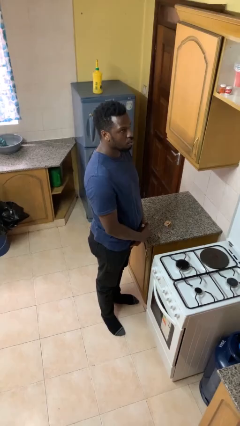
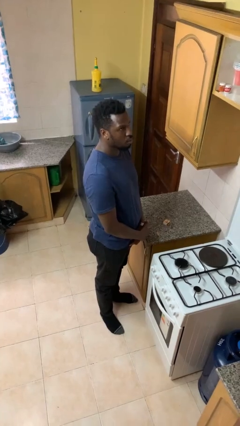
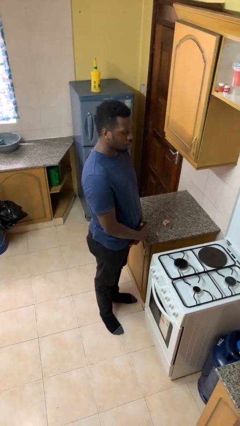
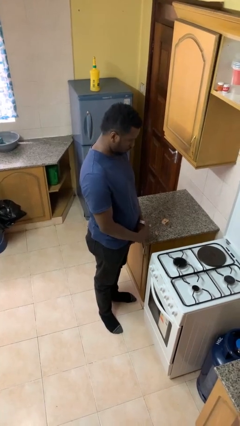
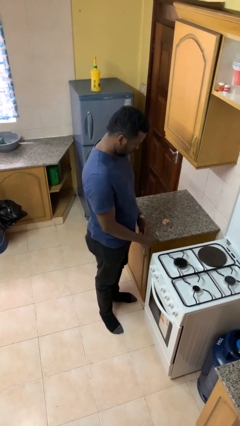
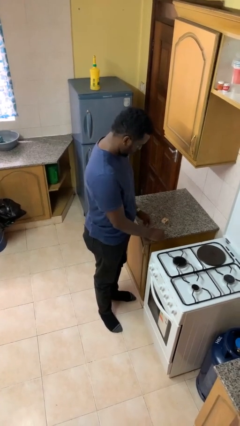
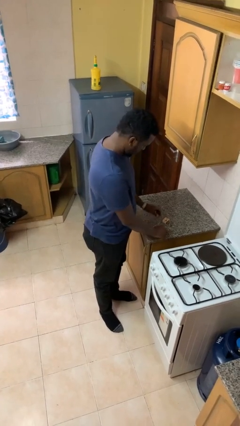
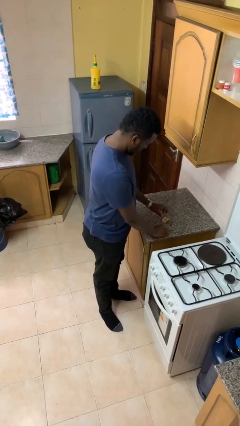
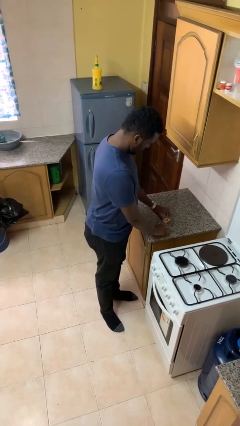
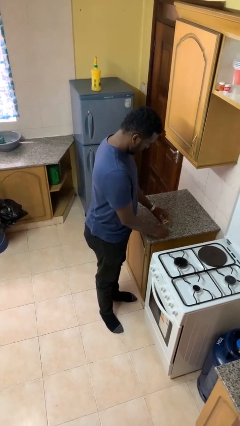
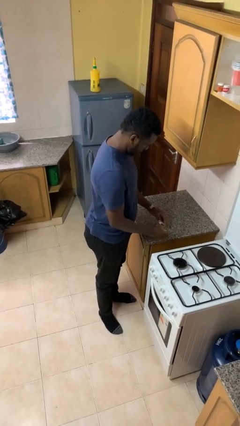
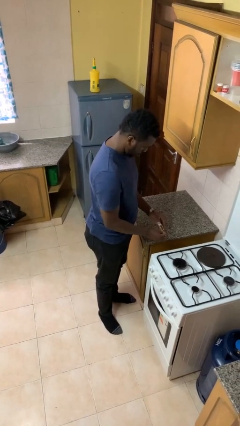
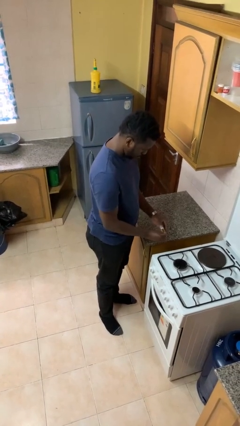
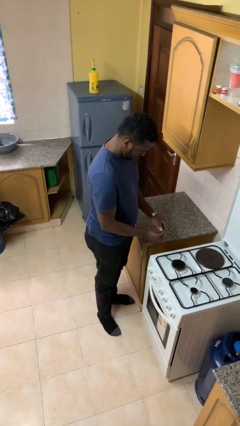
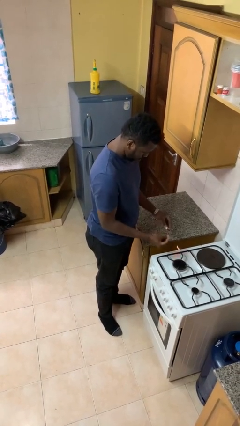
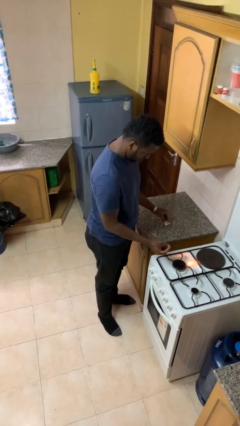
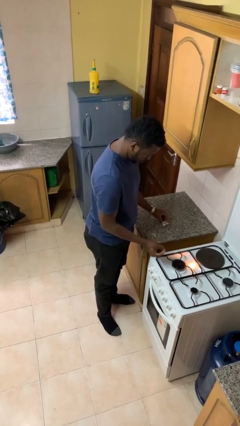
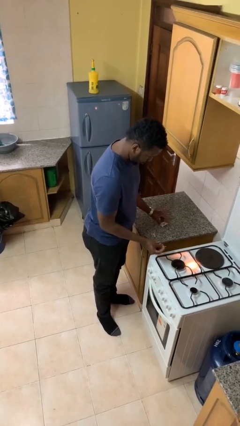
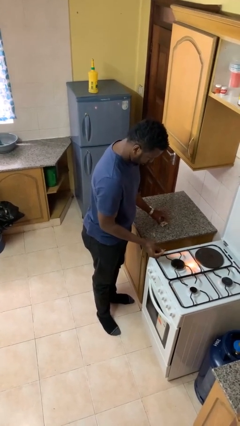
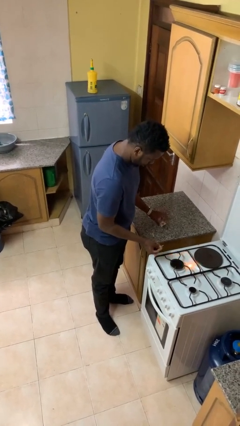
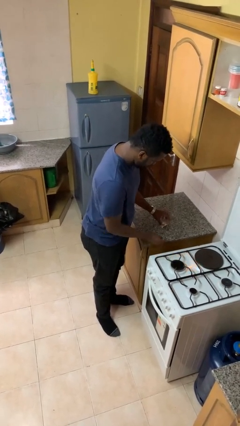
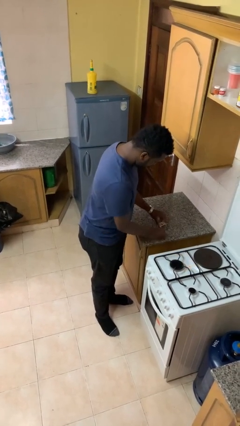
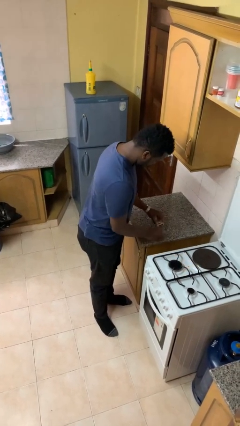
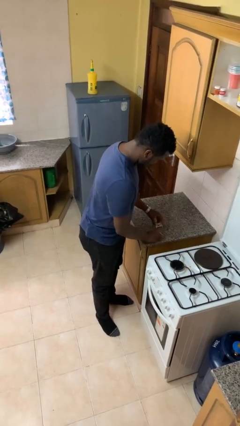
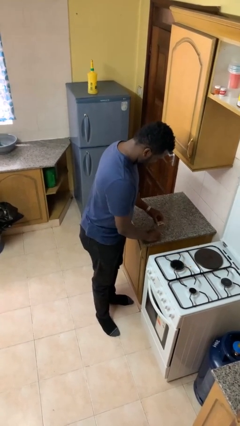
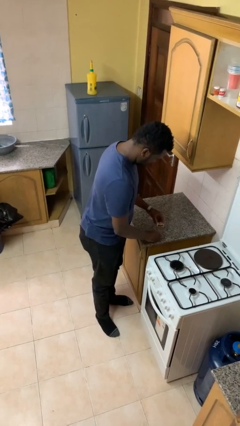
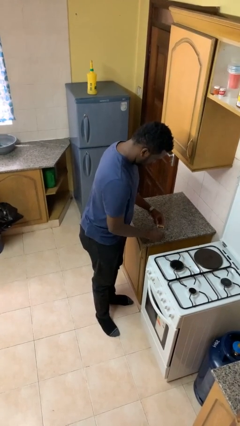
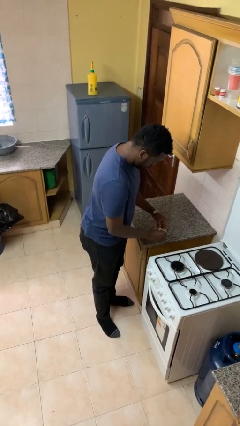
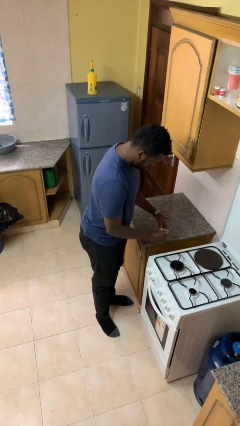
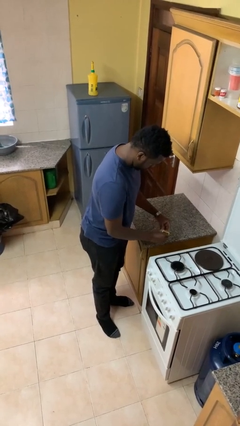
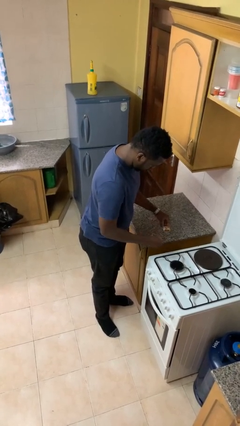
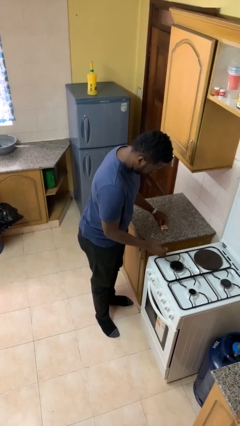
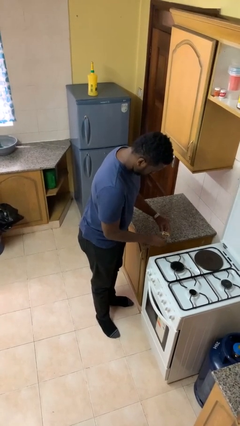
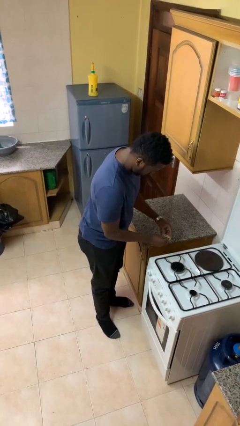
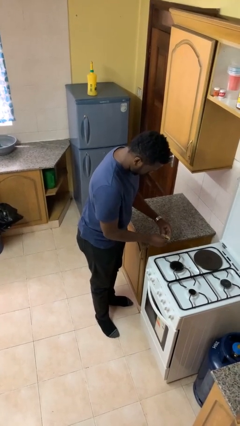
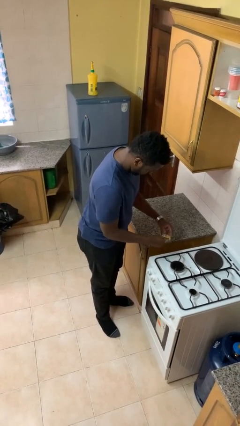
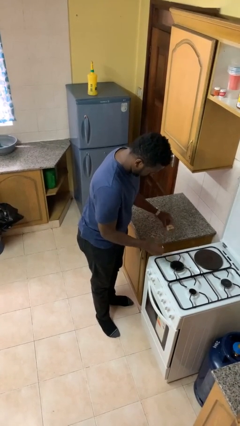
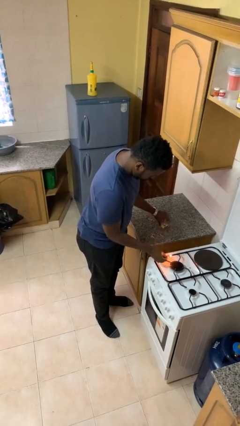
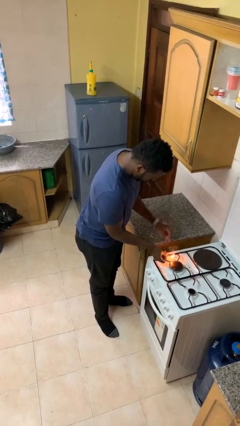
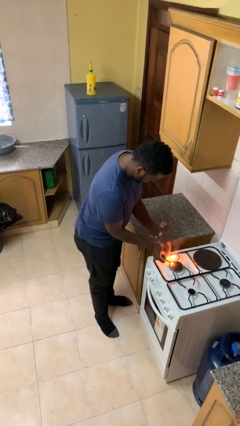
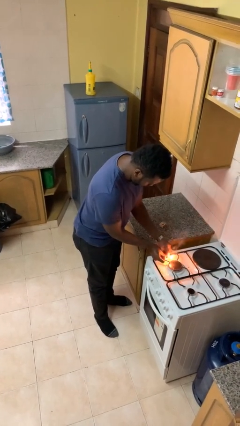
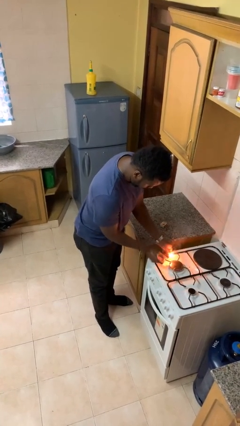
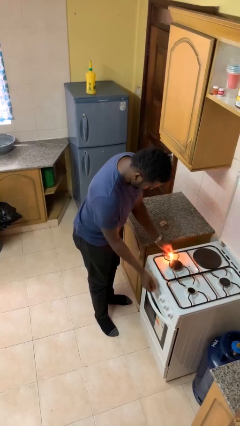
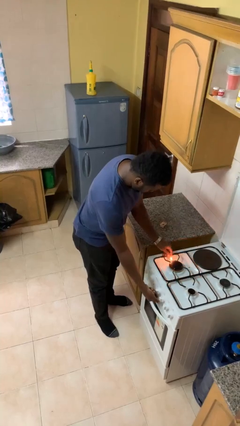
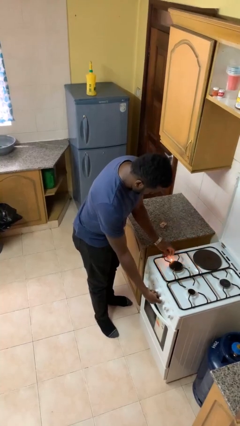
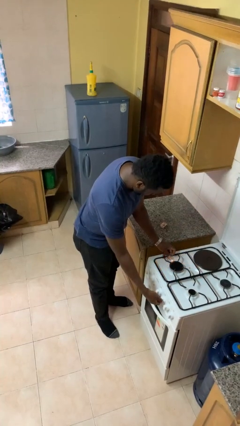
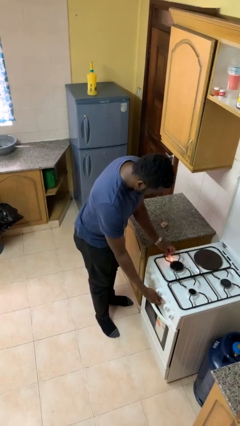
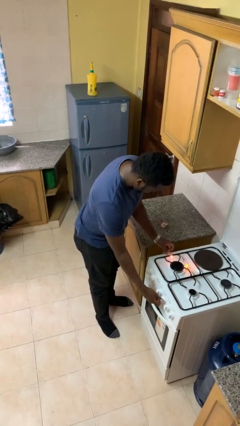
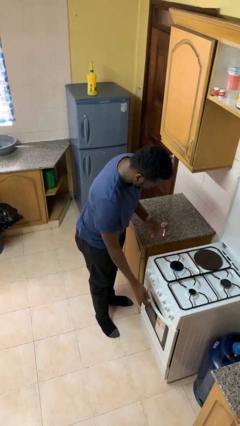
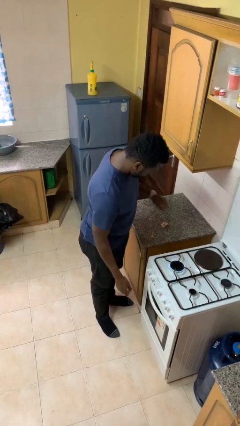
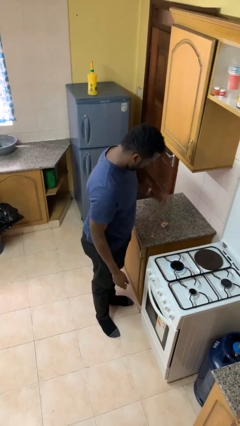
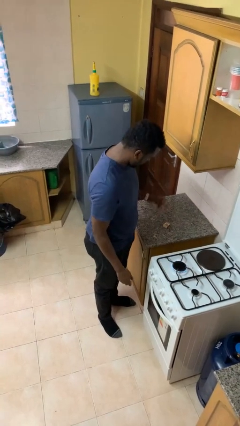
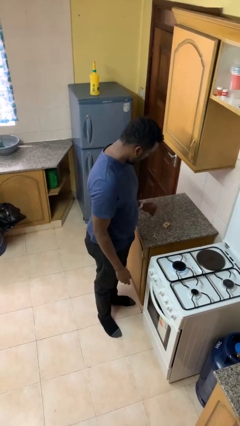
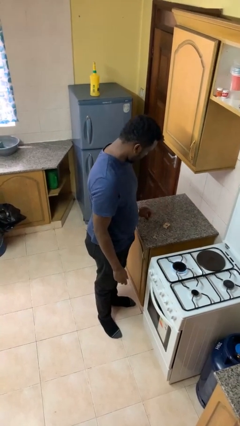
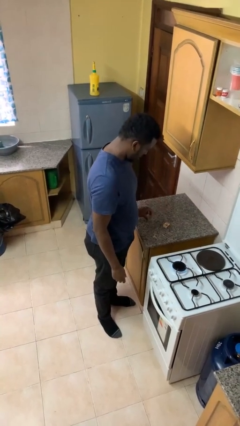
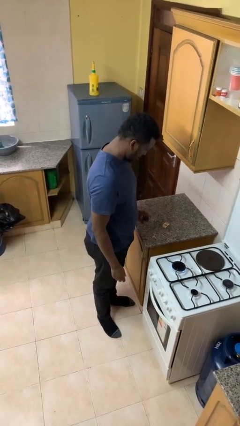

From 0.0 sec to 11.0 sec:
person turns on stovetop

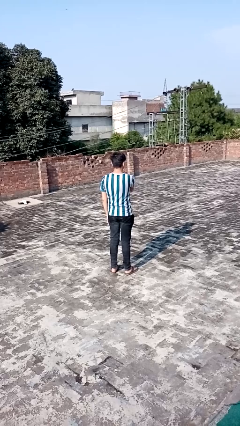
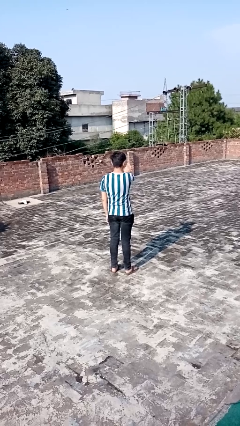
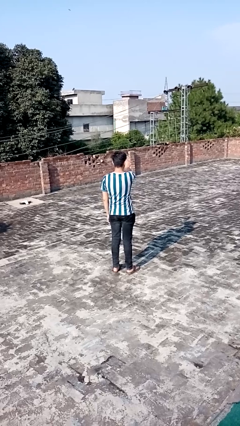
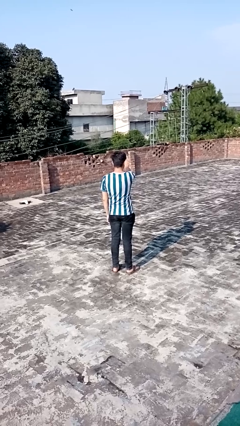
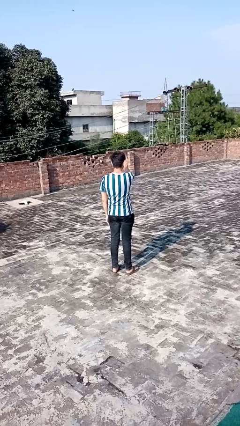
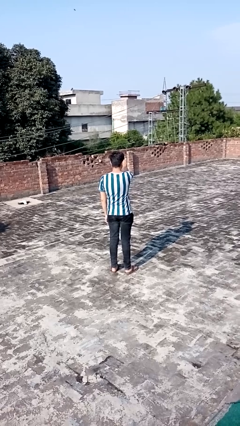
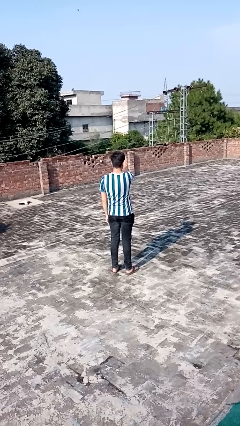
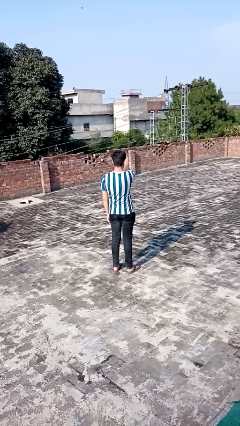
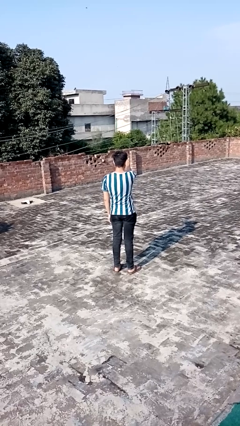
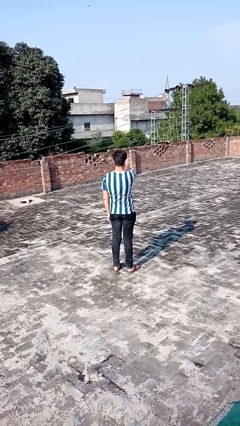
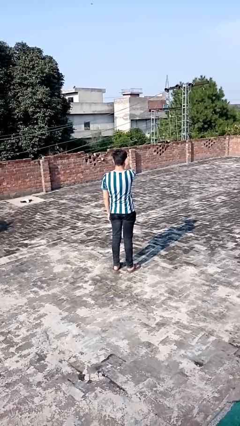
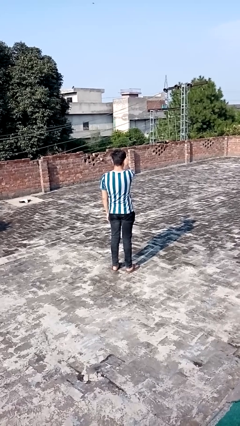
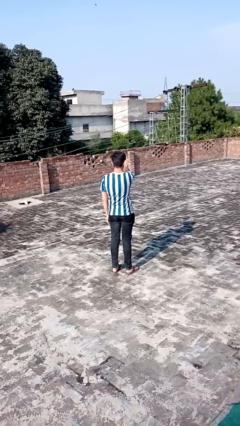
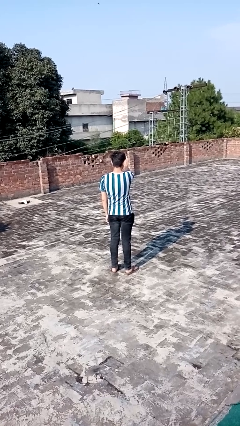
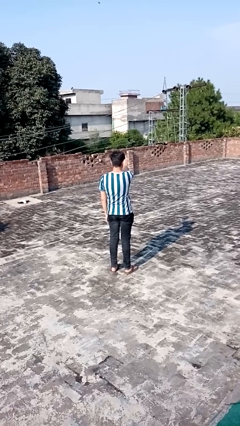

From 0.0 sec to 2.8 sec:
person gestures stop

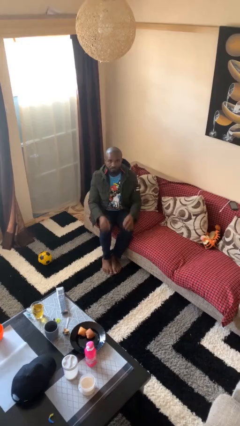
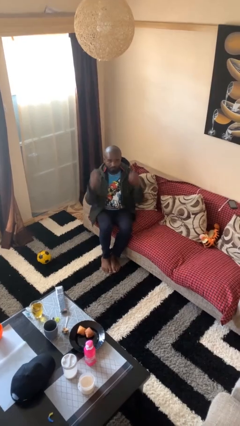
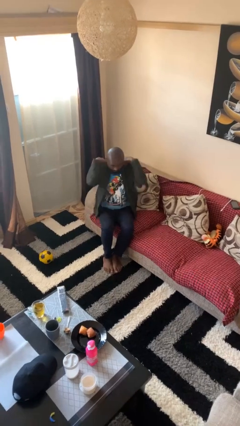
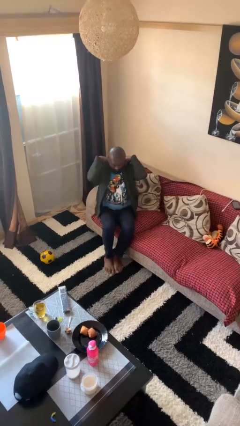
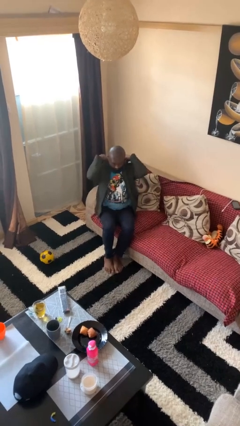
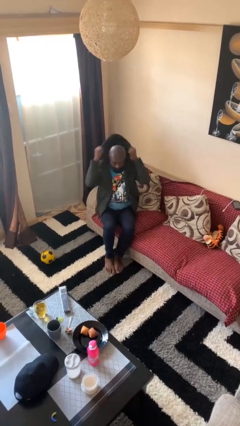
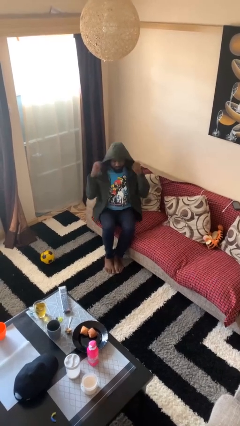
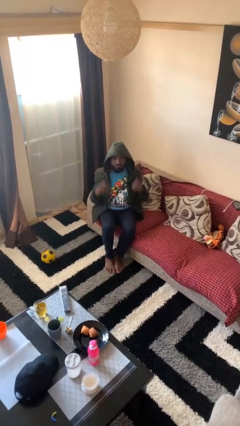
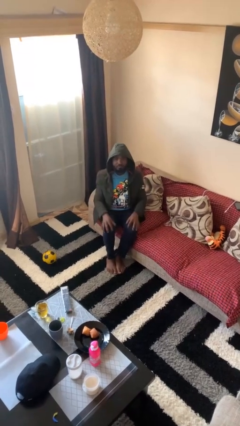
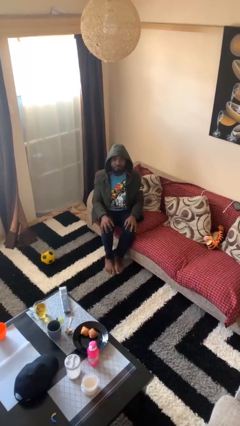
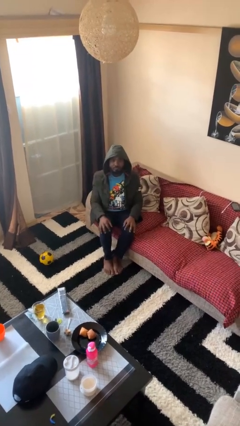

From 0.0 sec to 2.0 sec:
person puts on hoodie

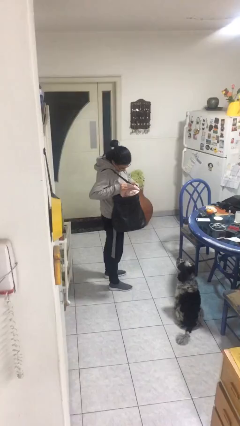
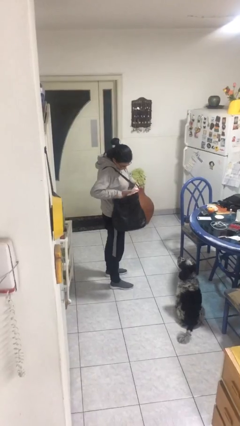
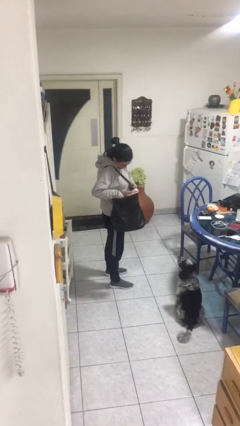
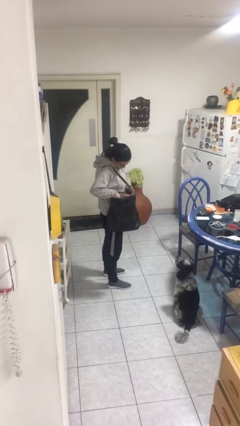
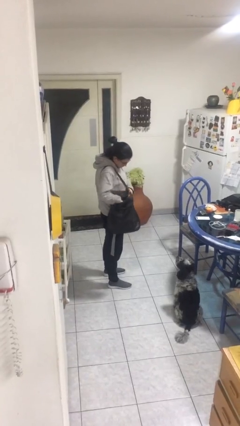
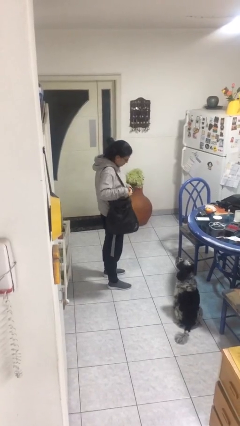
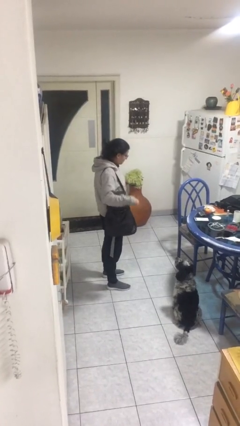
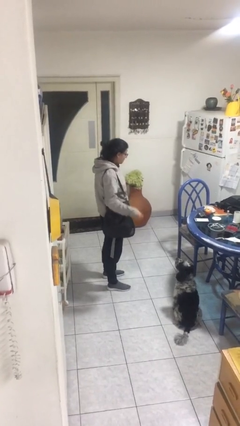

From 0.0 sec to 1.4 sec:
person puts object into purse

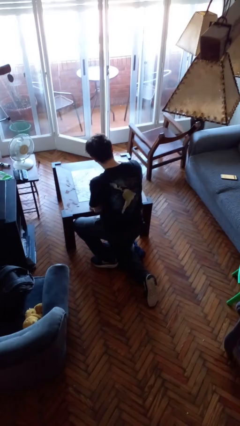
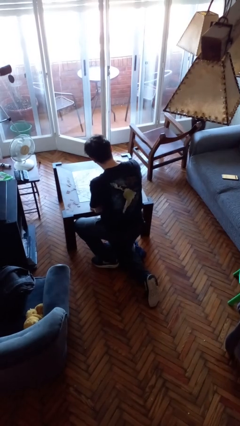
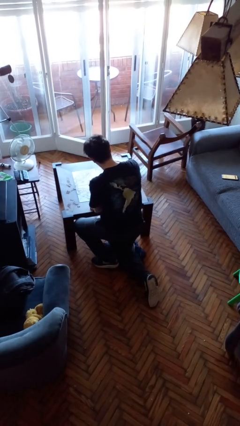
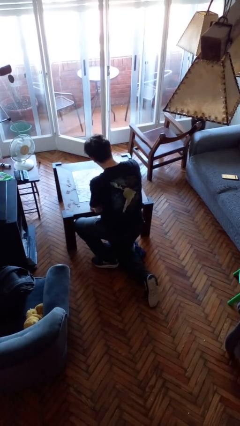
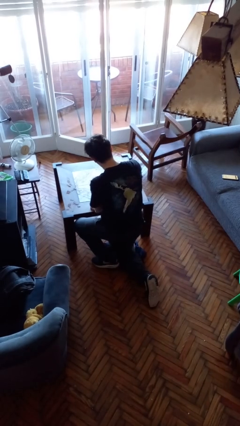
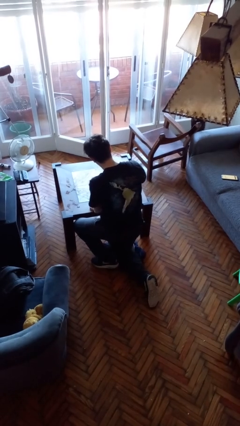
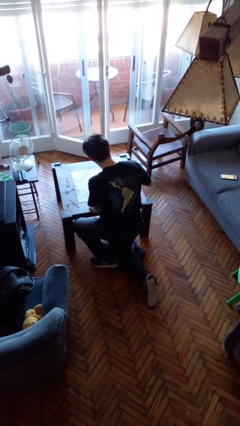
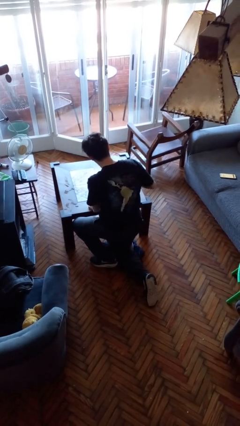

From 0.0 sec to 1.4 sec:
person sprays from bottle
